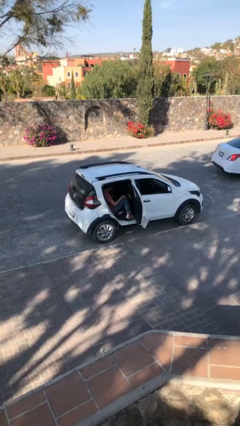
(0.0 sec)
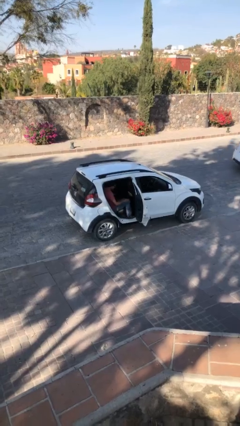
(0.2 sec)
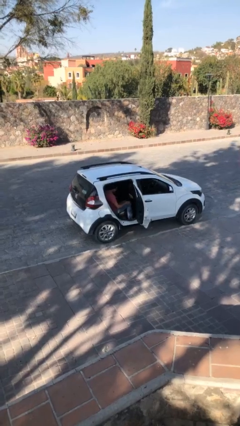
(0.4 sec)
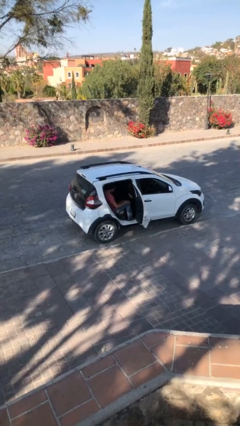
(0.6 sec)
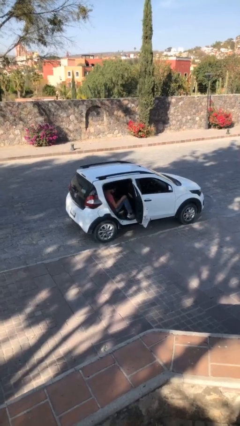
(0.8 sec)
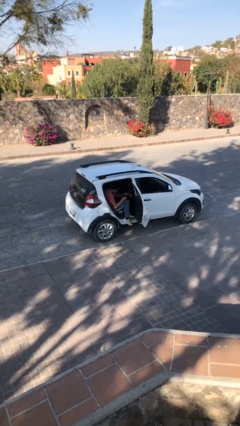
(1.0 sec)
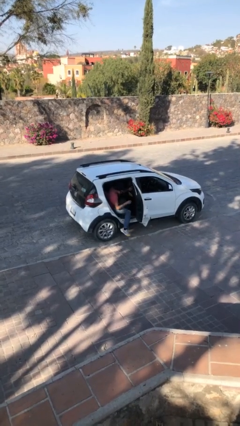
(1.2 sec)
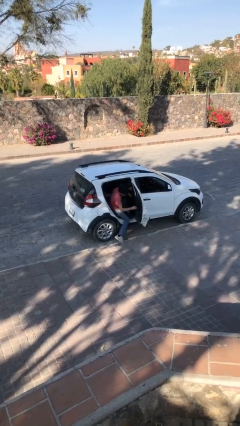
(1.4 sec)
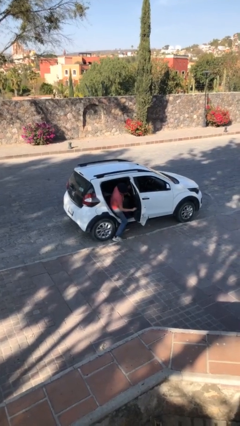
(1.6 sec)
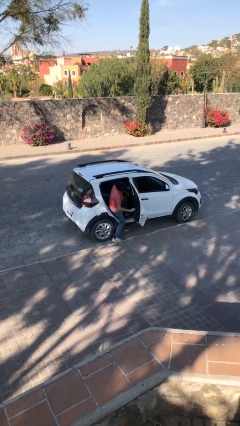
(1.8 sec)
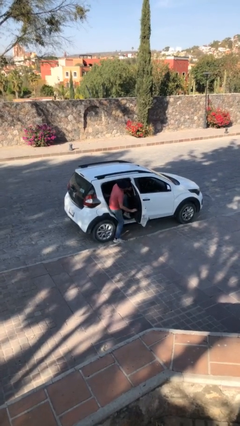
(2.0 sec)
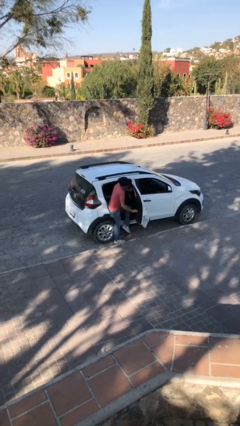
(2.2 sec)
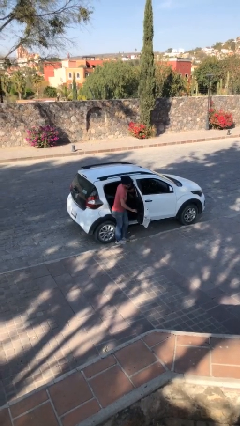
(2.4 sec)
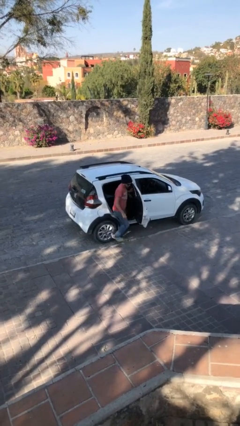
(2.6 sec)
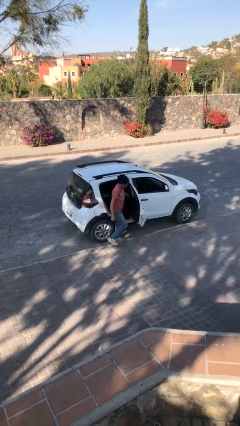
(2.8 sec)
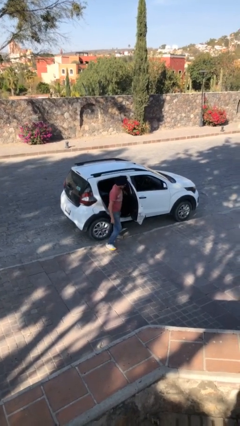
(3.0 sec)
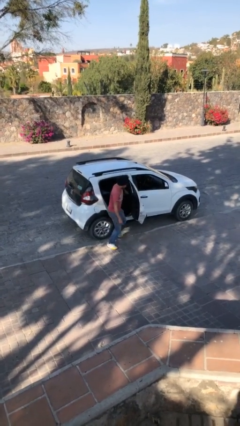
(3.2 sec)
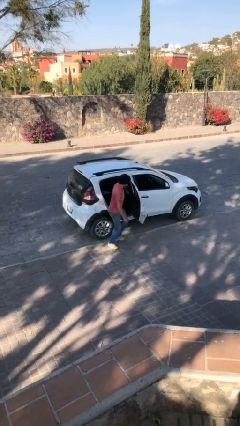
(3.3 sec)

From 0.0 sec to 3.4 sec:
person exits car

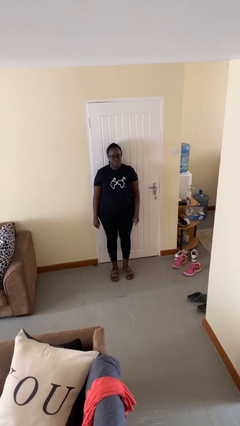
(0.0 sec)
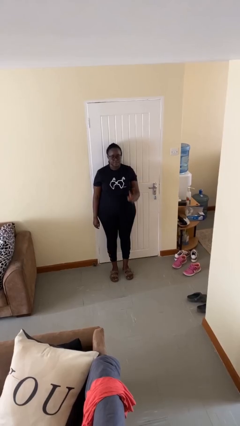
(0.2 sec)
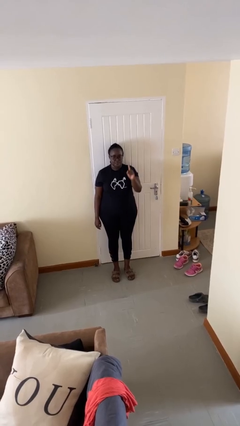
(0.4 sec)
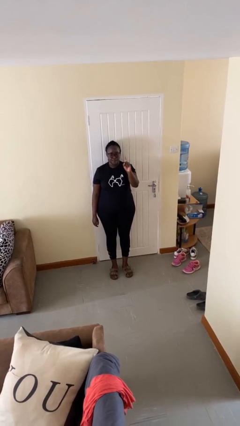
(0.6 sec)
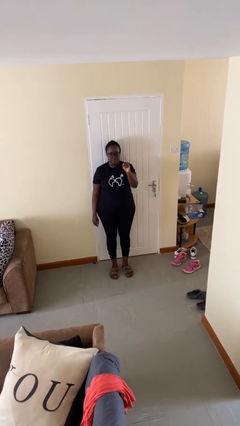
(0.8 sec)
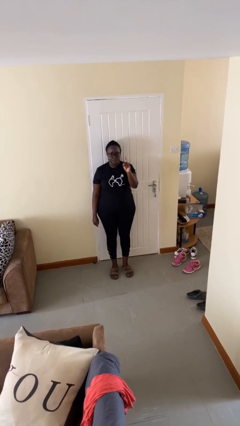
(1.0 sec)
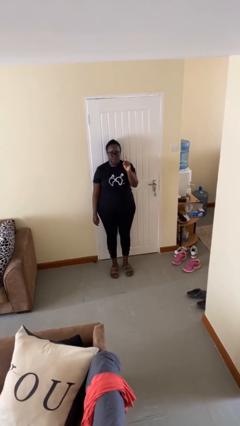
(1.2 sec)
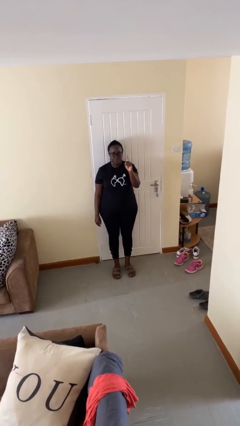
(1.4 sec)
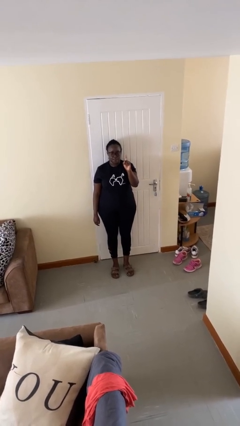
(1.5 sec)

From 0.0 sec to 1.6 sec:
person gestures number one

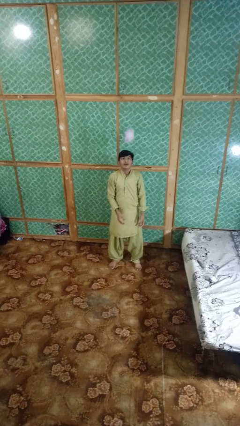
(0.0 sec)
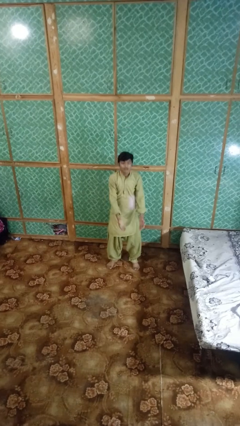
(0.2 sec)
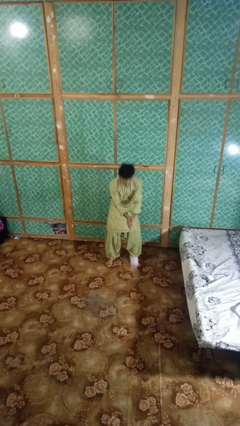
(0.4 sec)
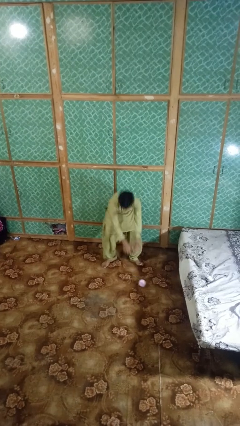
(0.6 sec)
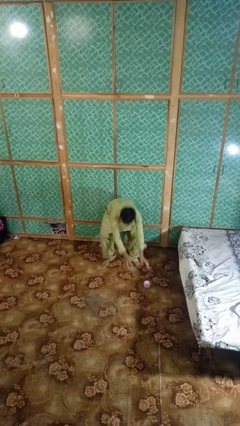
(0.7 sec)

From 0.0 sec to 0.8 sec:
person catches dropped object

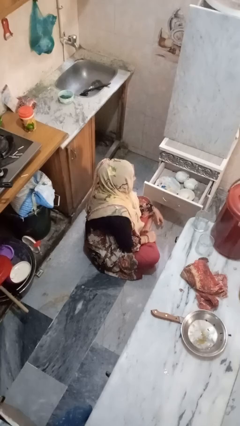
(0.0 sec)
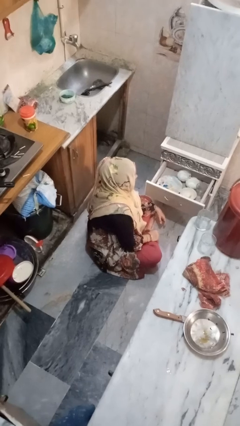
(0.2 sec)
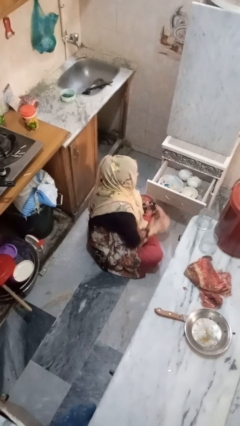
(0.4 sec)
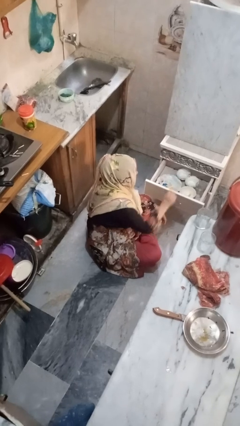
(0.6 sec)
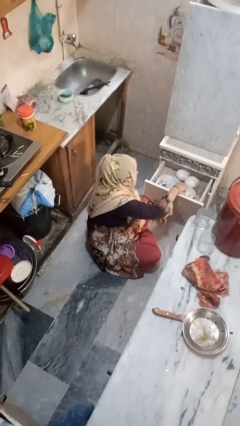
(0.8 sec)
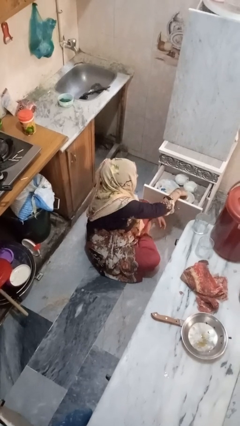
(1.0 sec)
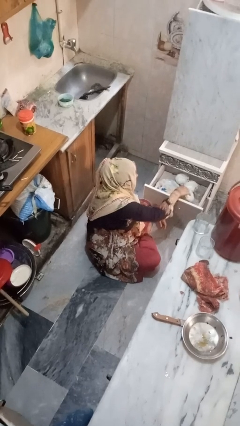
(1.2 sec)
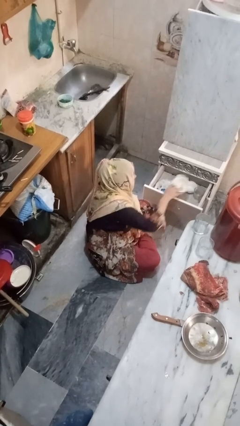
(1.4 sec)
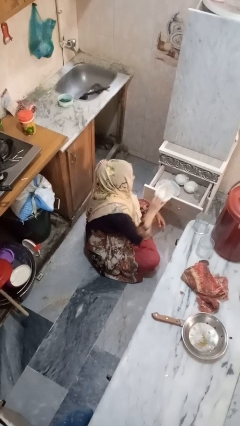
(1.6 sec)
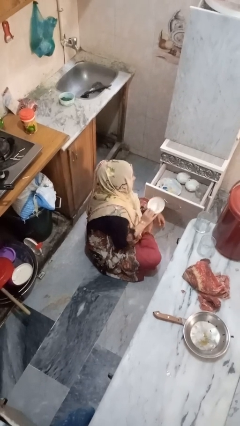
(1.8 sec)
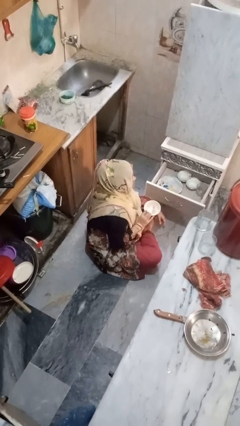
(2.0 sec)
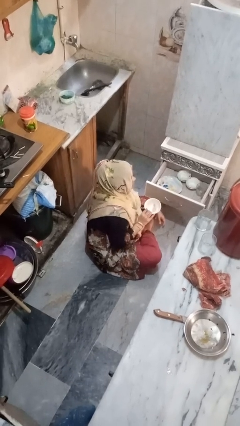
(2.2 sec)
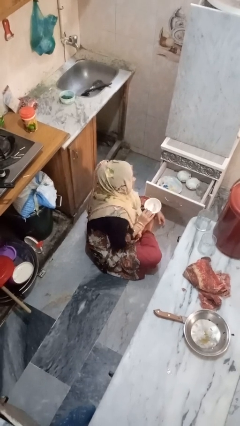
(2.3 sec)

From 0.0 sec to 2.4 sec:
person takes object from kitchen drawer

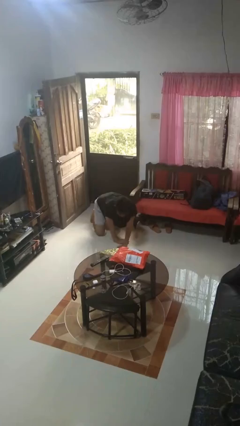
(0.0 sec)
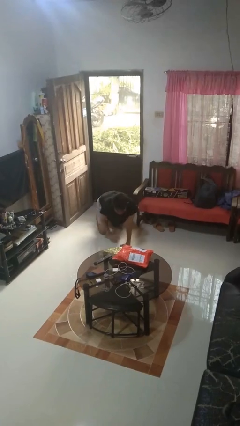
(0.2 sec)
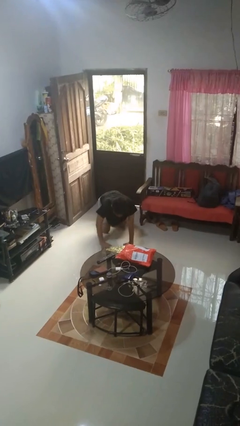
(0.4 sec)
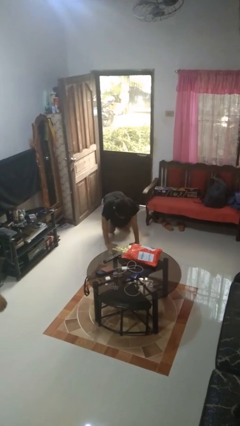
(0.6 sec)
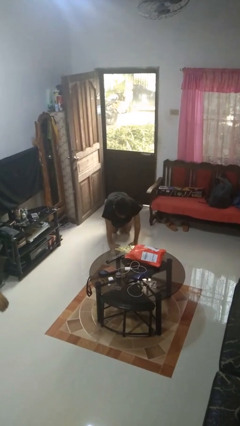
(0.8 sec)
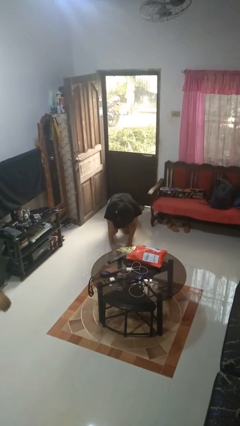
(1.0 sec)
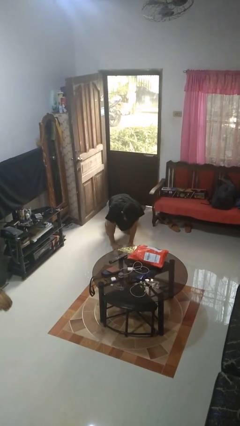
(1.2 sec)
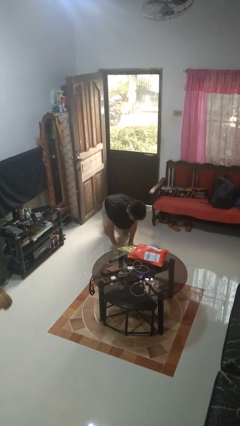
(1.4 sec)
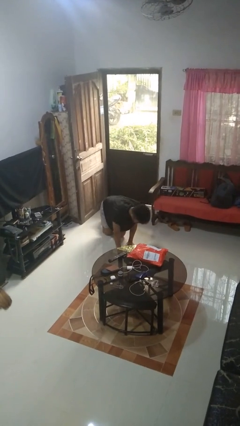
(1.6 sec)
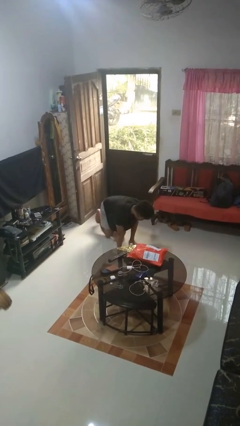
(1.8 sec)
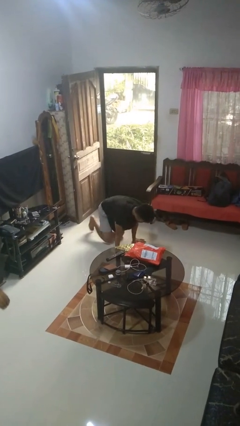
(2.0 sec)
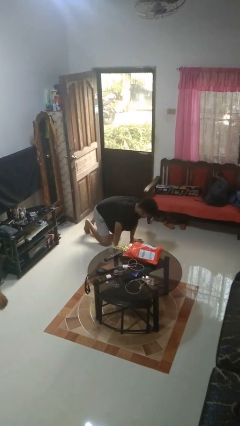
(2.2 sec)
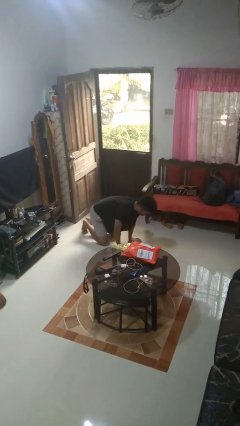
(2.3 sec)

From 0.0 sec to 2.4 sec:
person crawls

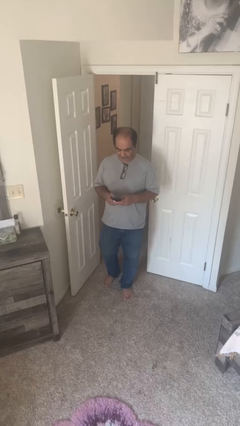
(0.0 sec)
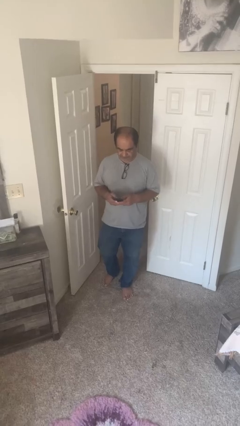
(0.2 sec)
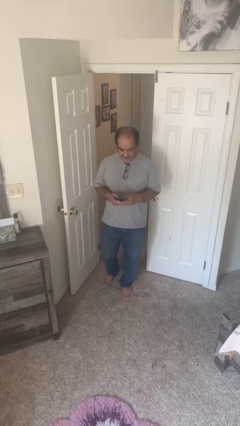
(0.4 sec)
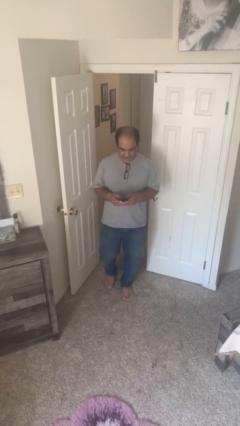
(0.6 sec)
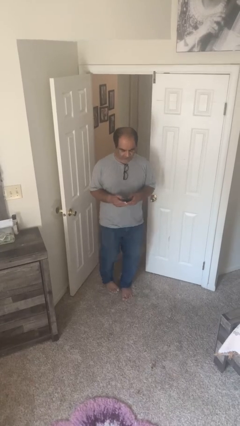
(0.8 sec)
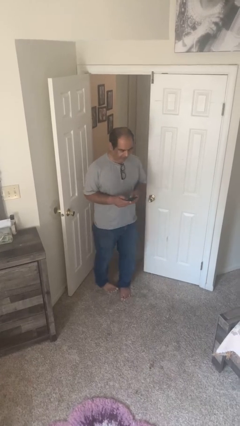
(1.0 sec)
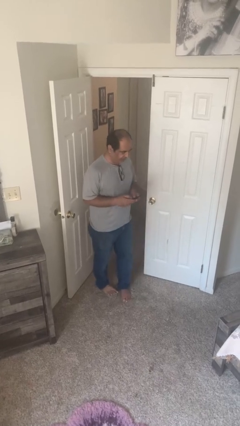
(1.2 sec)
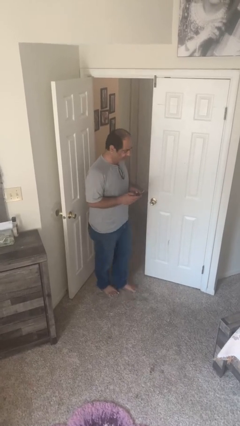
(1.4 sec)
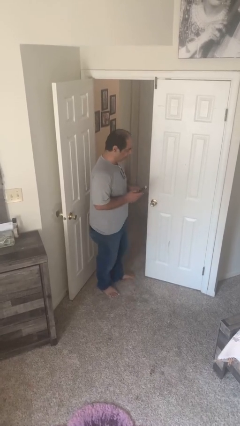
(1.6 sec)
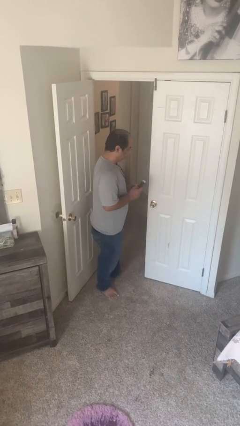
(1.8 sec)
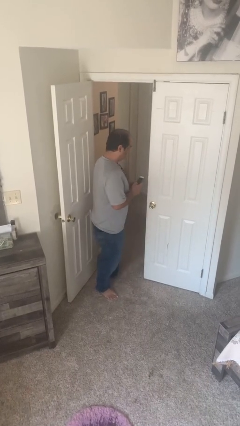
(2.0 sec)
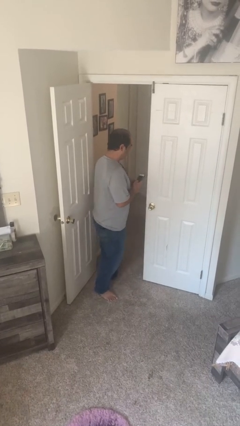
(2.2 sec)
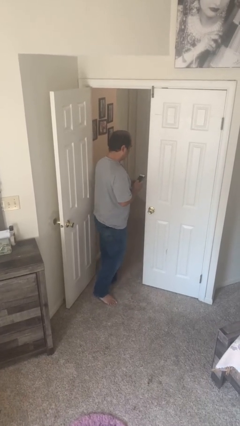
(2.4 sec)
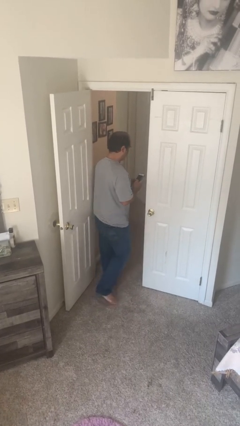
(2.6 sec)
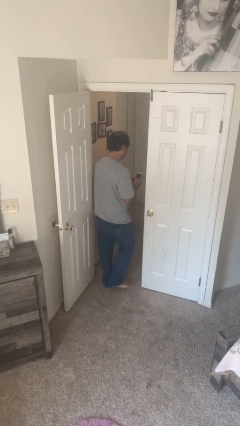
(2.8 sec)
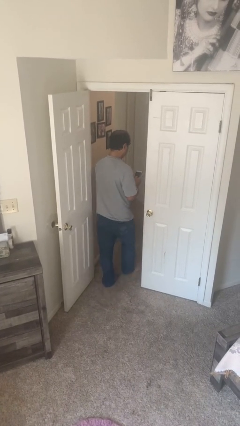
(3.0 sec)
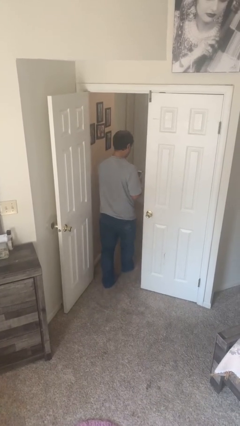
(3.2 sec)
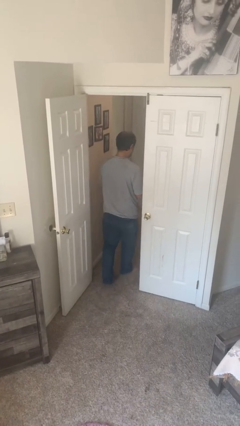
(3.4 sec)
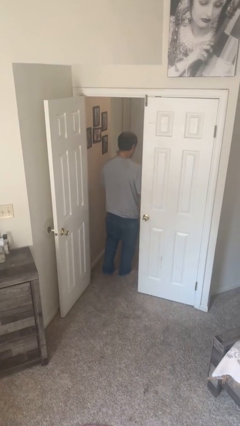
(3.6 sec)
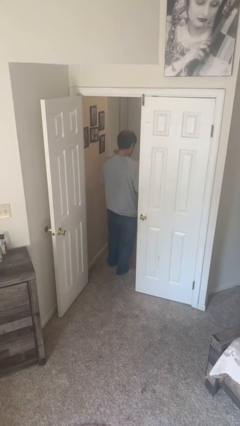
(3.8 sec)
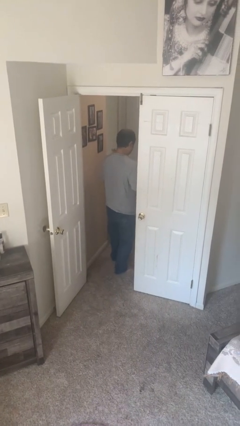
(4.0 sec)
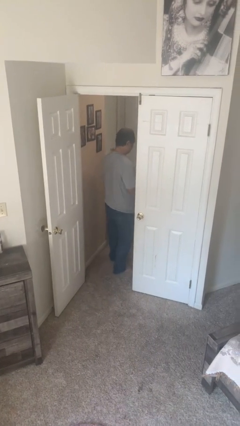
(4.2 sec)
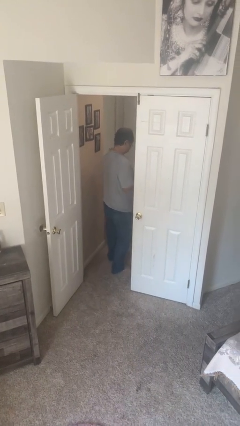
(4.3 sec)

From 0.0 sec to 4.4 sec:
person exits scene through structure

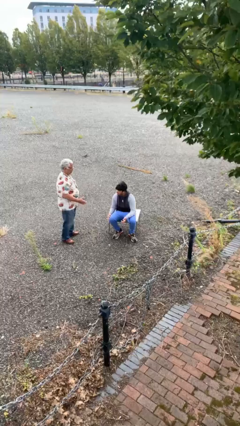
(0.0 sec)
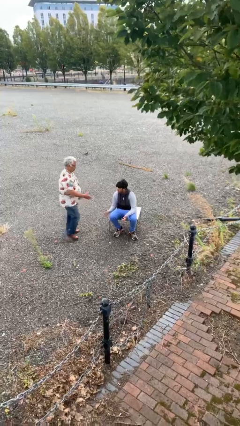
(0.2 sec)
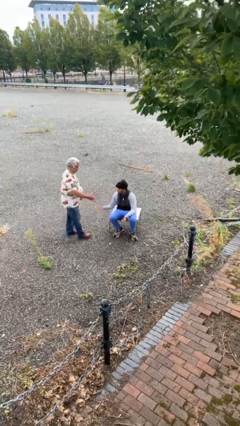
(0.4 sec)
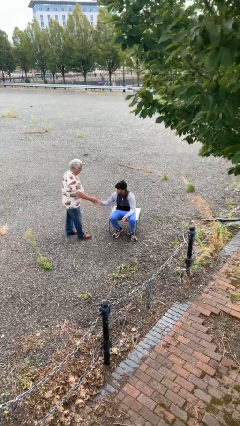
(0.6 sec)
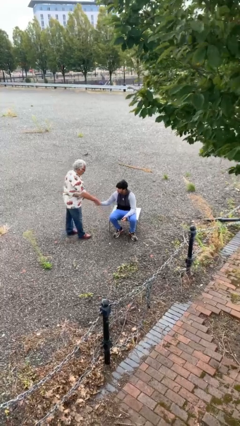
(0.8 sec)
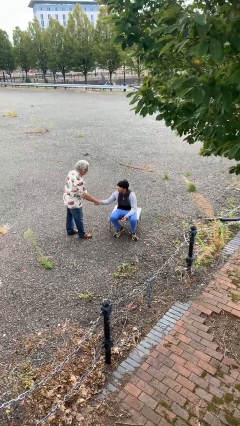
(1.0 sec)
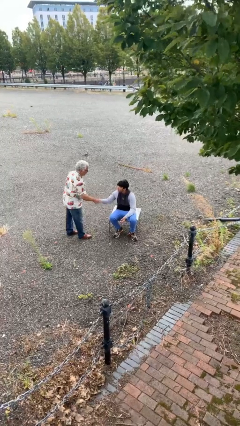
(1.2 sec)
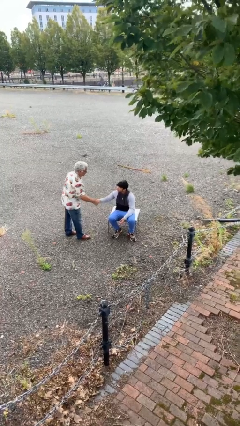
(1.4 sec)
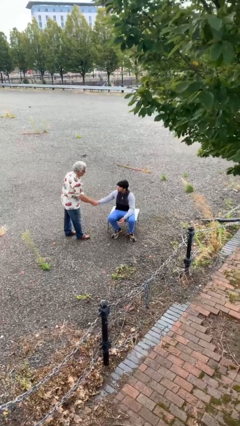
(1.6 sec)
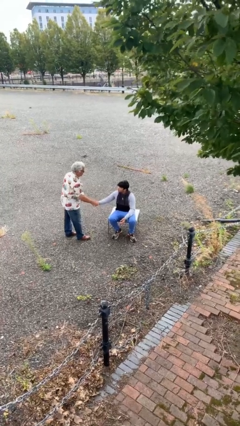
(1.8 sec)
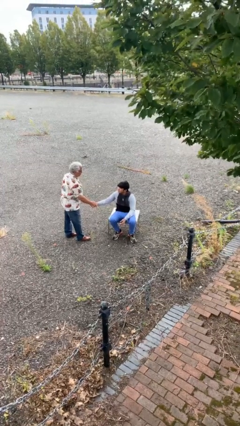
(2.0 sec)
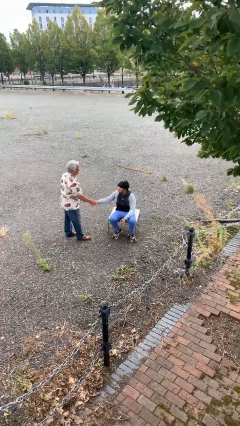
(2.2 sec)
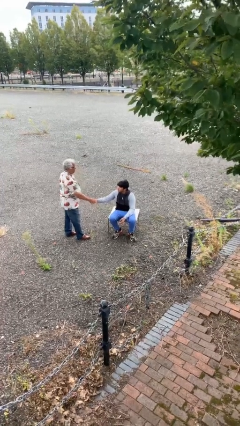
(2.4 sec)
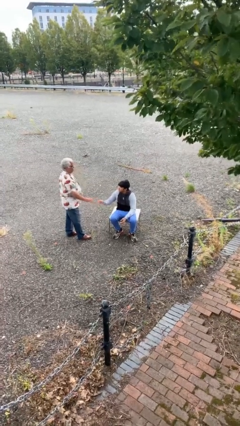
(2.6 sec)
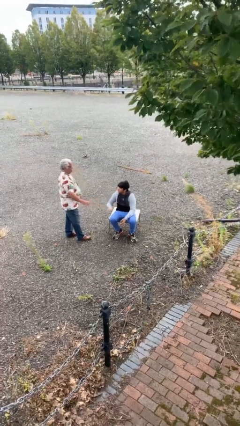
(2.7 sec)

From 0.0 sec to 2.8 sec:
person shakes hand
